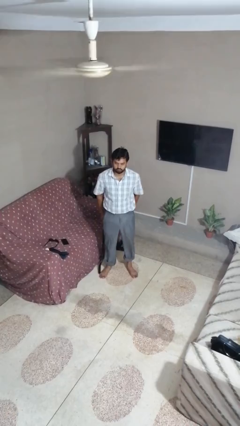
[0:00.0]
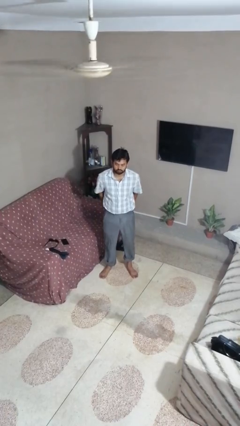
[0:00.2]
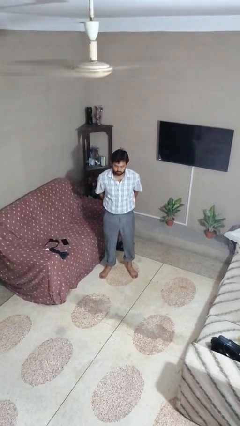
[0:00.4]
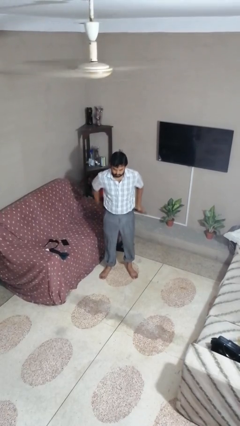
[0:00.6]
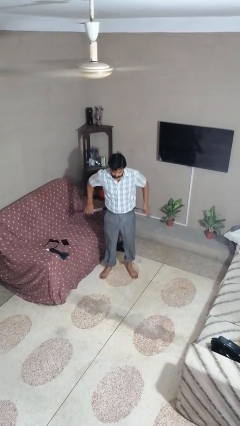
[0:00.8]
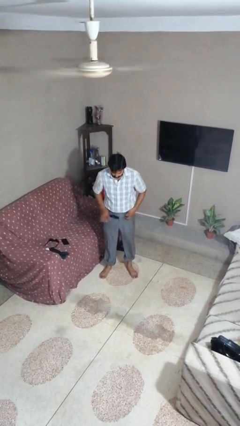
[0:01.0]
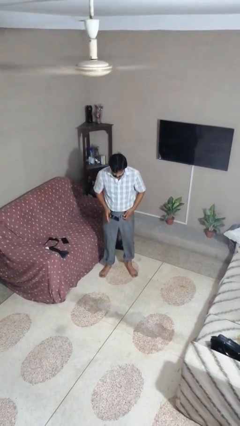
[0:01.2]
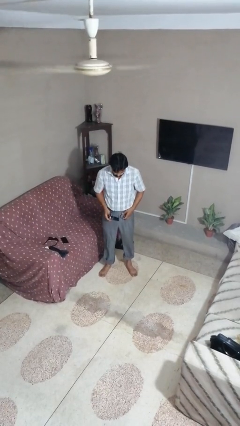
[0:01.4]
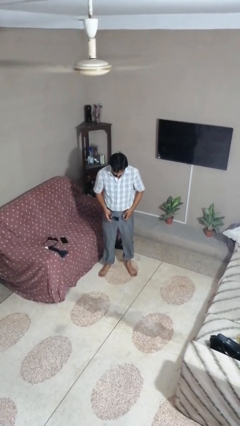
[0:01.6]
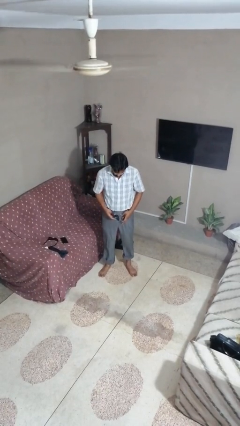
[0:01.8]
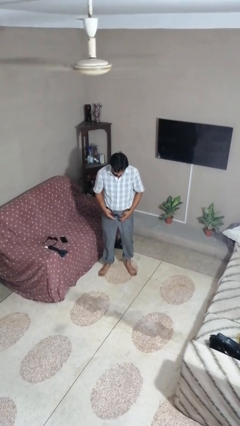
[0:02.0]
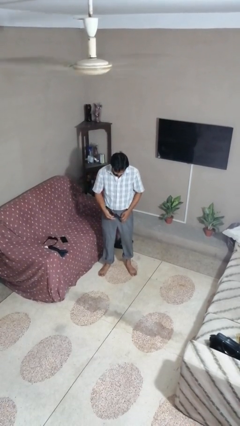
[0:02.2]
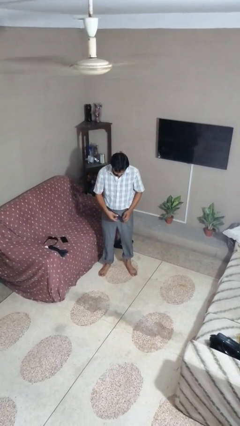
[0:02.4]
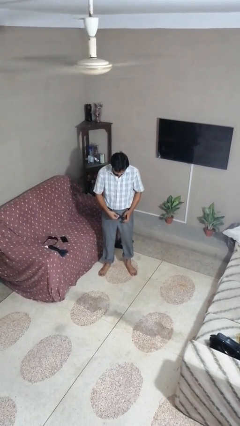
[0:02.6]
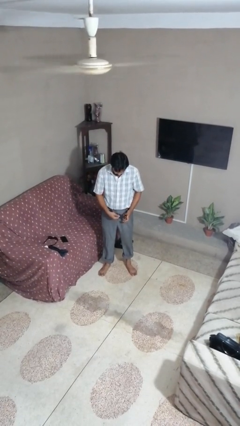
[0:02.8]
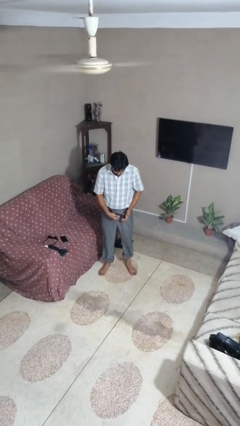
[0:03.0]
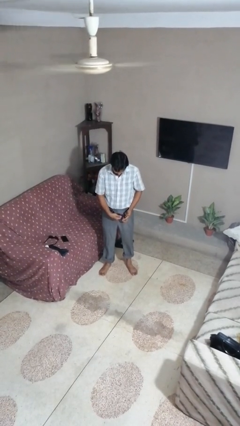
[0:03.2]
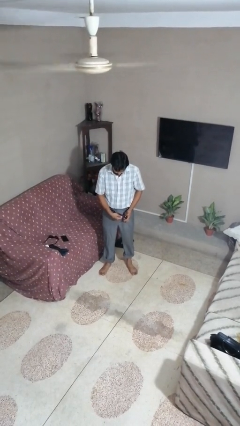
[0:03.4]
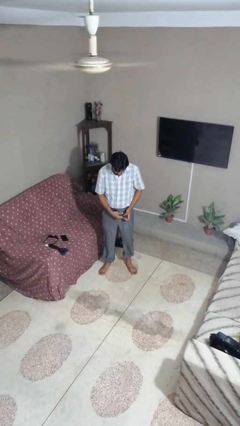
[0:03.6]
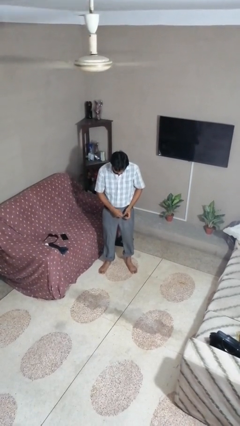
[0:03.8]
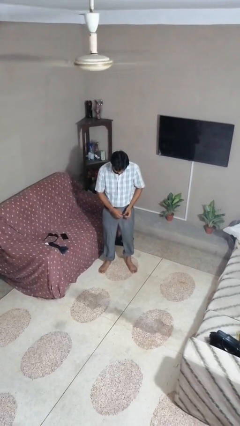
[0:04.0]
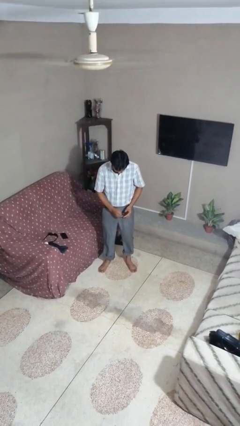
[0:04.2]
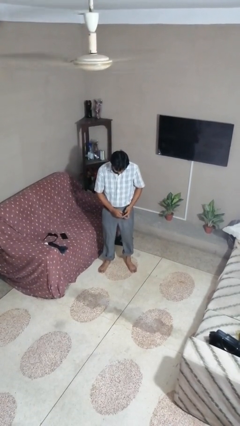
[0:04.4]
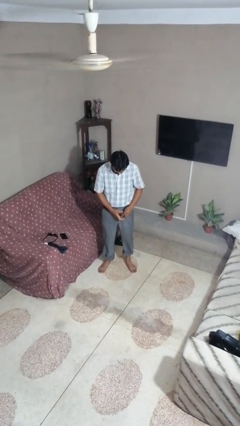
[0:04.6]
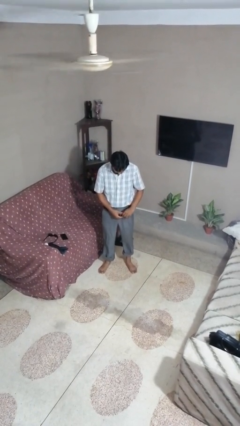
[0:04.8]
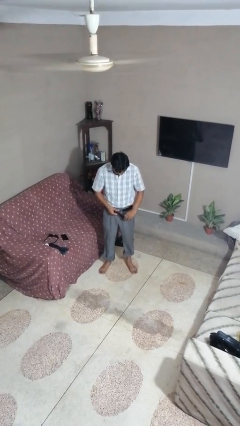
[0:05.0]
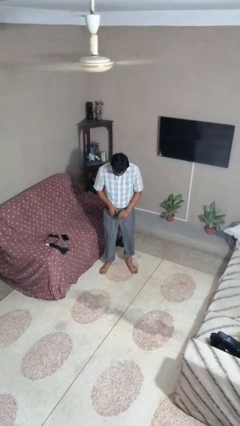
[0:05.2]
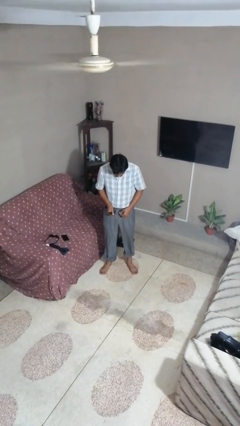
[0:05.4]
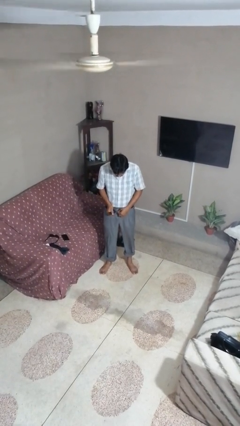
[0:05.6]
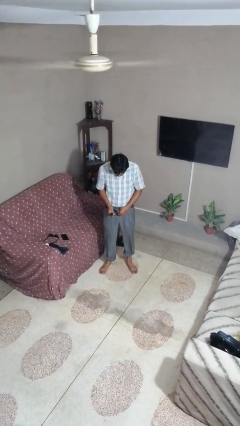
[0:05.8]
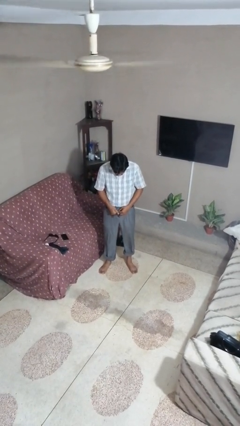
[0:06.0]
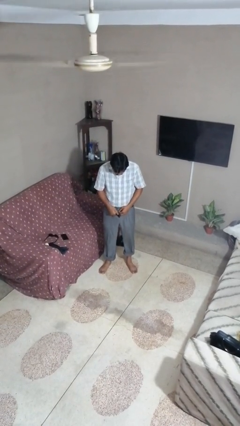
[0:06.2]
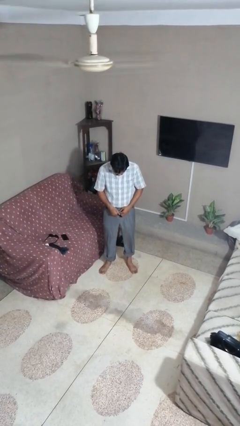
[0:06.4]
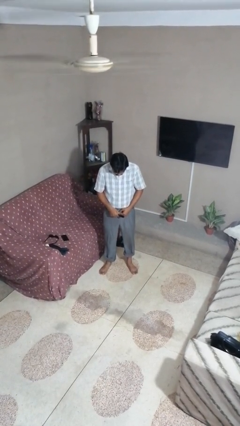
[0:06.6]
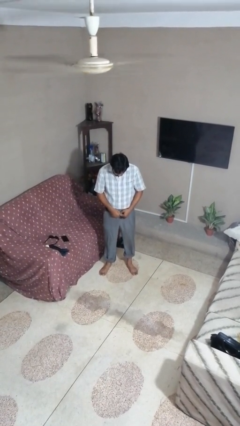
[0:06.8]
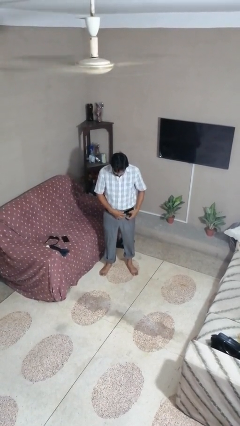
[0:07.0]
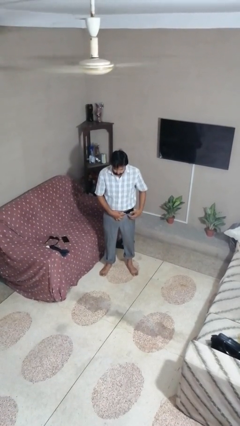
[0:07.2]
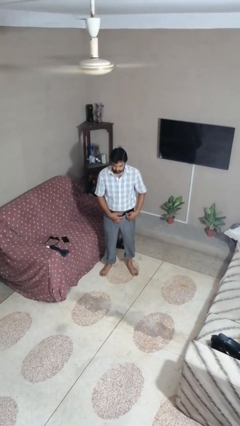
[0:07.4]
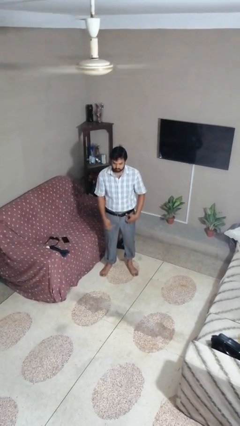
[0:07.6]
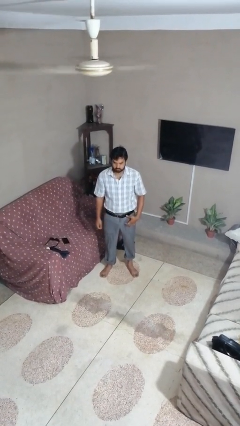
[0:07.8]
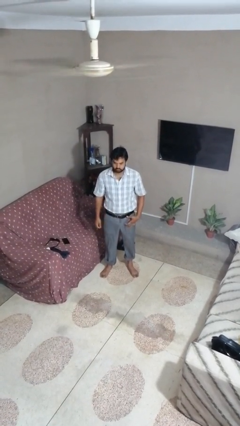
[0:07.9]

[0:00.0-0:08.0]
person puts on belt

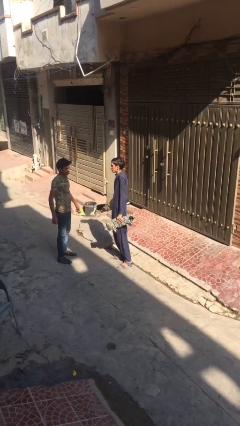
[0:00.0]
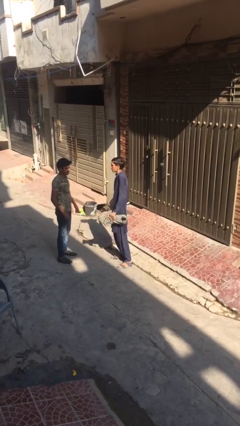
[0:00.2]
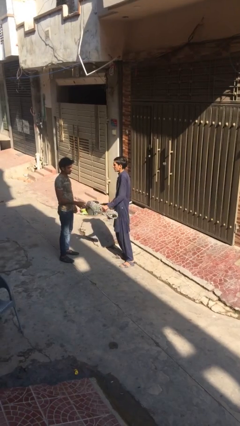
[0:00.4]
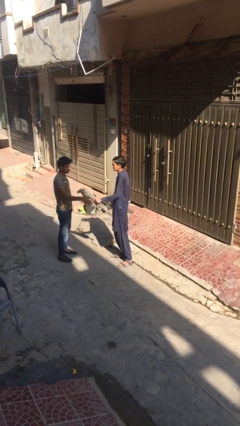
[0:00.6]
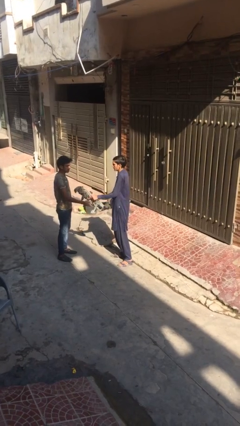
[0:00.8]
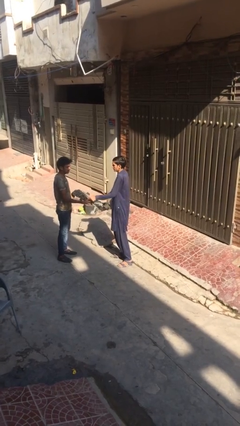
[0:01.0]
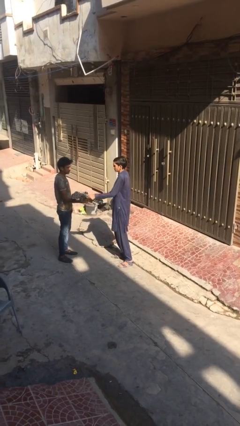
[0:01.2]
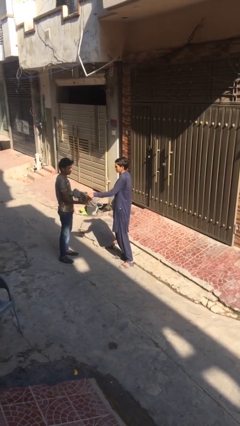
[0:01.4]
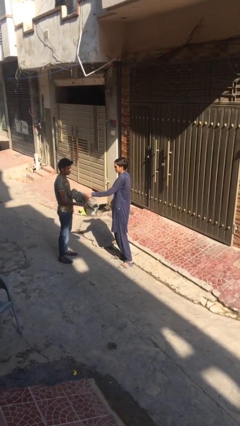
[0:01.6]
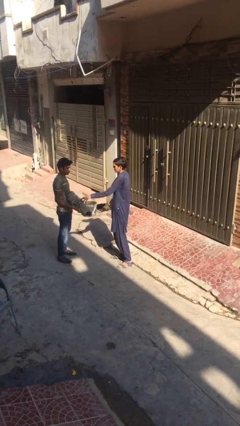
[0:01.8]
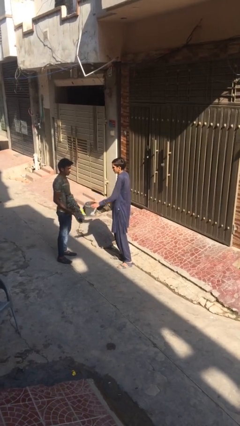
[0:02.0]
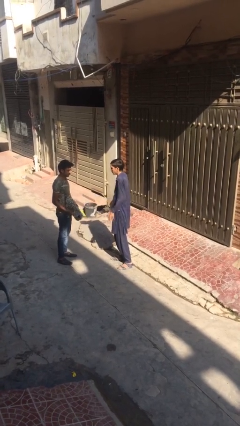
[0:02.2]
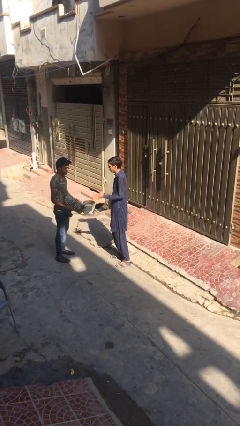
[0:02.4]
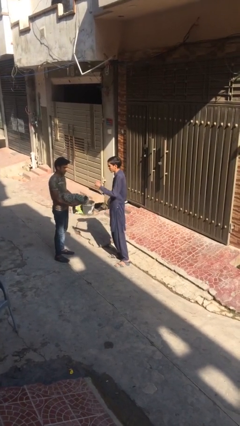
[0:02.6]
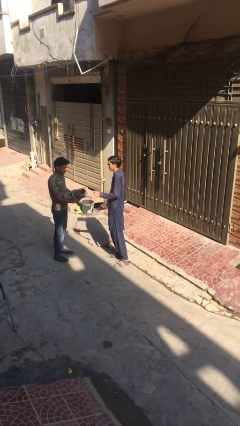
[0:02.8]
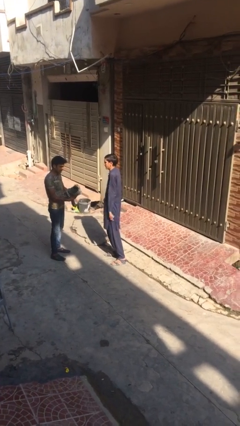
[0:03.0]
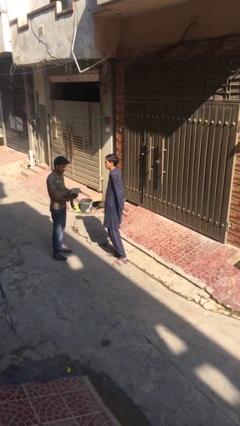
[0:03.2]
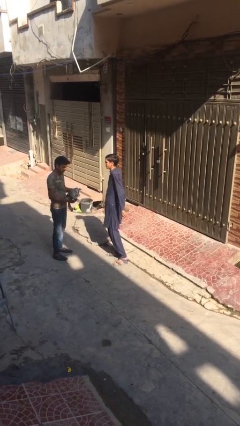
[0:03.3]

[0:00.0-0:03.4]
person transfers object to person

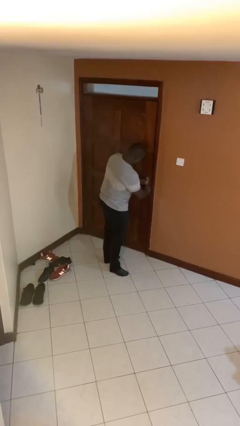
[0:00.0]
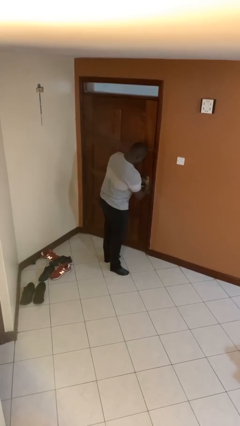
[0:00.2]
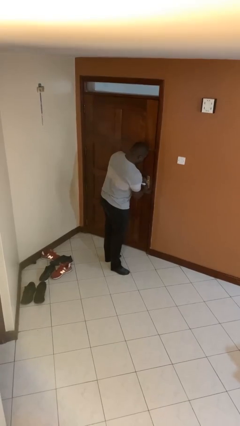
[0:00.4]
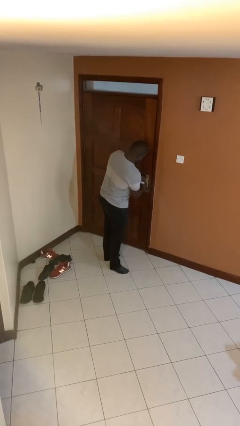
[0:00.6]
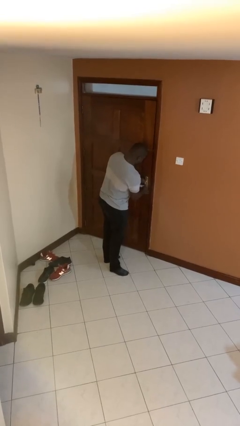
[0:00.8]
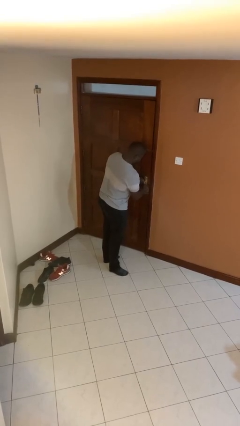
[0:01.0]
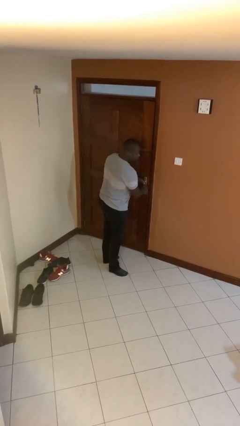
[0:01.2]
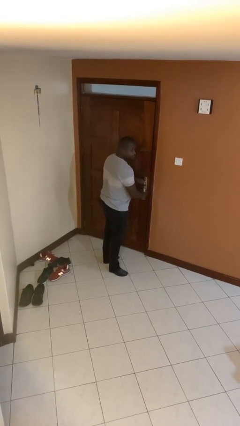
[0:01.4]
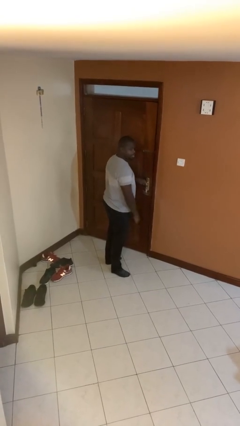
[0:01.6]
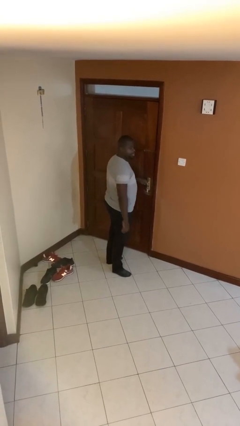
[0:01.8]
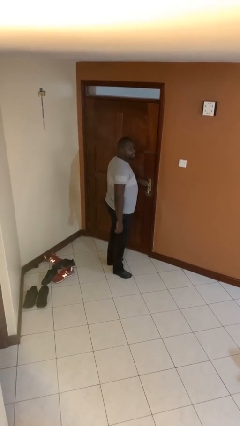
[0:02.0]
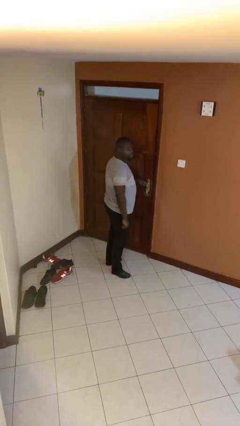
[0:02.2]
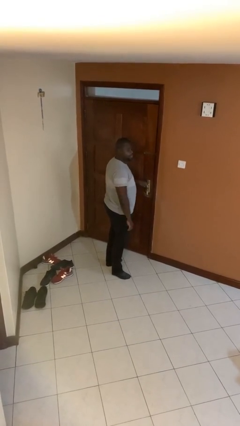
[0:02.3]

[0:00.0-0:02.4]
person locks door with keys

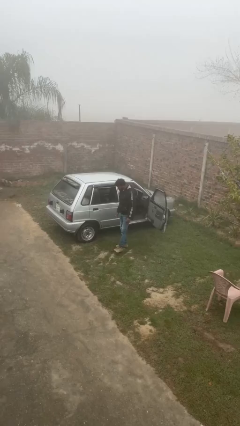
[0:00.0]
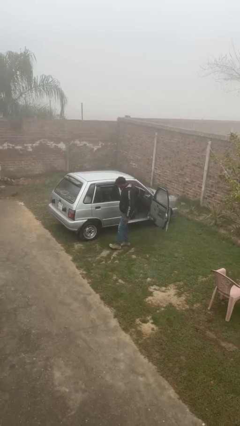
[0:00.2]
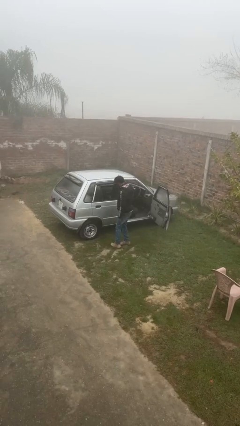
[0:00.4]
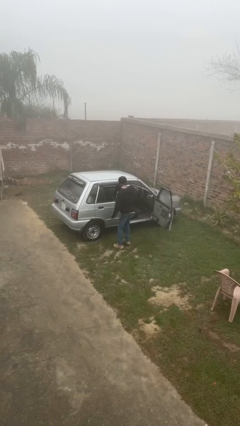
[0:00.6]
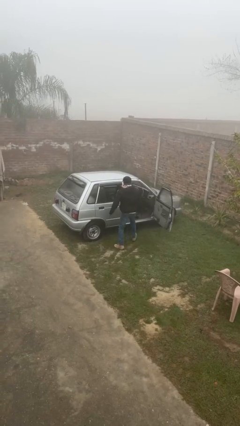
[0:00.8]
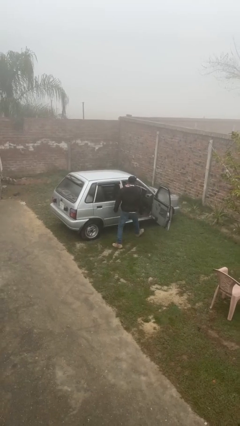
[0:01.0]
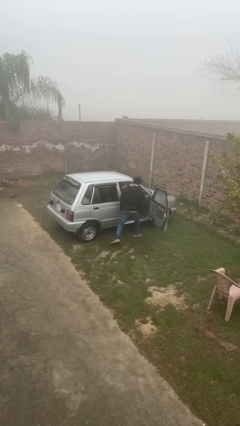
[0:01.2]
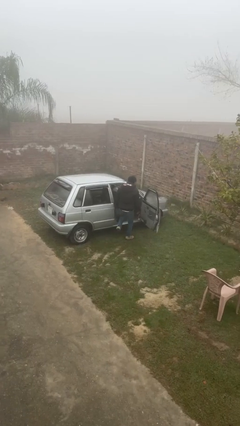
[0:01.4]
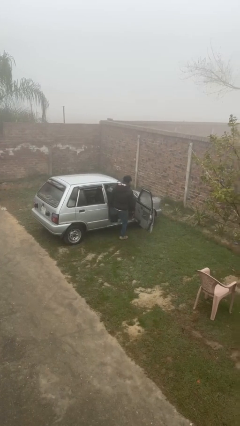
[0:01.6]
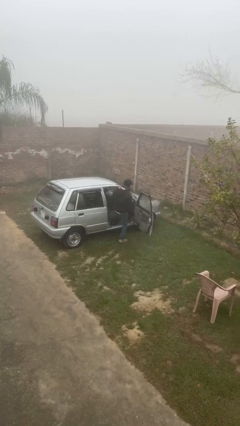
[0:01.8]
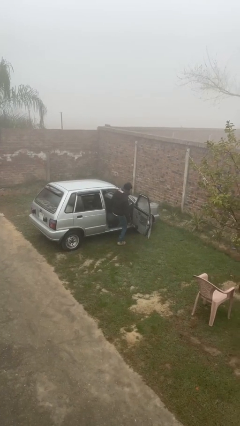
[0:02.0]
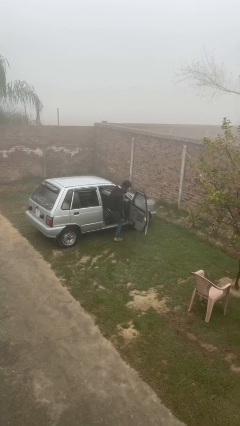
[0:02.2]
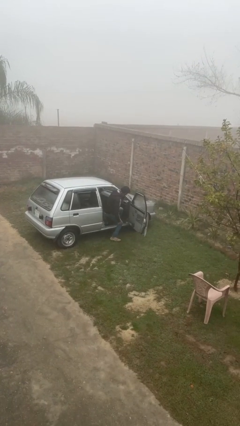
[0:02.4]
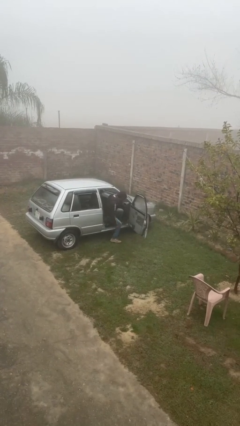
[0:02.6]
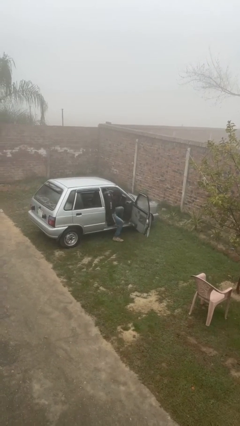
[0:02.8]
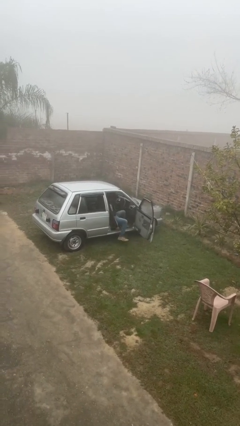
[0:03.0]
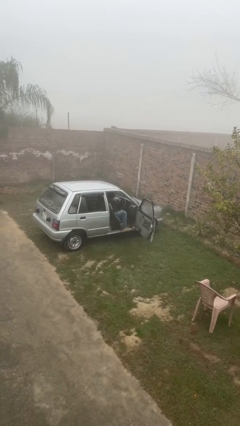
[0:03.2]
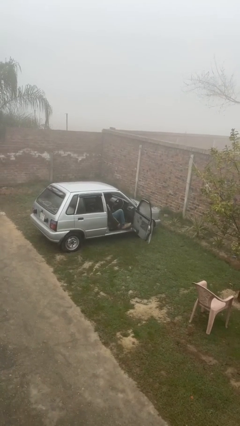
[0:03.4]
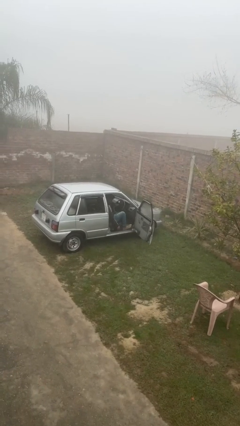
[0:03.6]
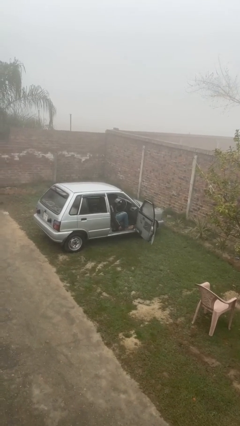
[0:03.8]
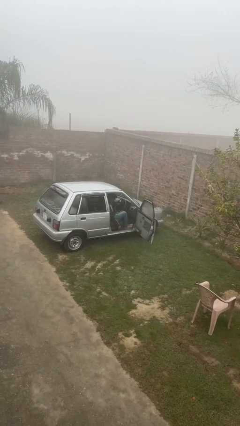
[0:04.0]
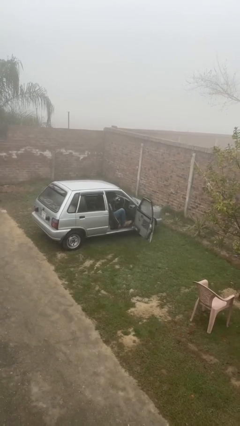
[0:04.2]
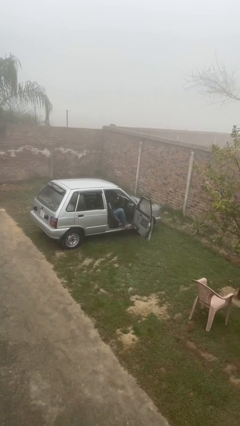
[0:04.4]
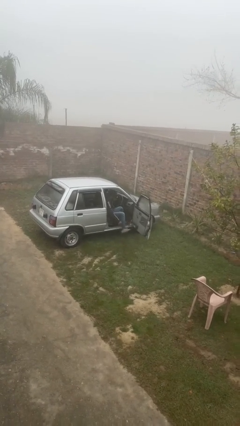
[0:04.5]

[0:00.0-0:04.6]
person enters car
